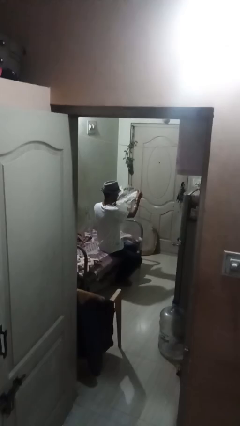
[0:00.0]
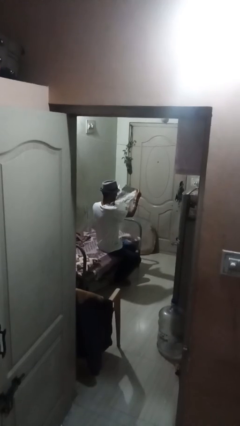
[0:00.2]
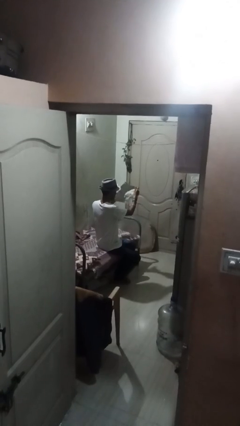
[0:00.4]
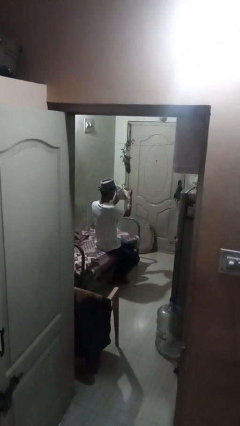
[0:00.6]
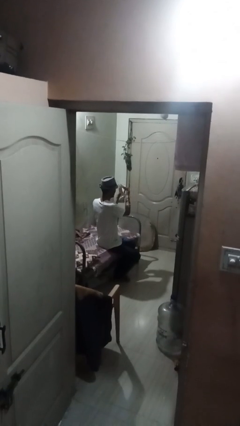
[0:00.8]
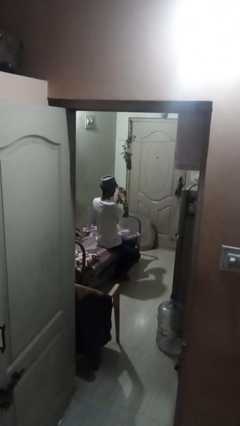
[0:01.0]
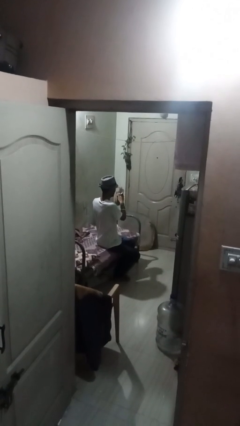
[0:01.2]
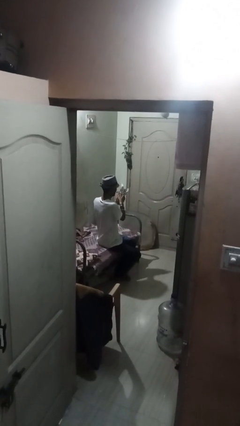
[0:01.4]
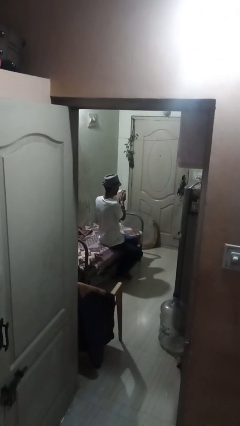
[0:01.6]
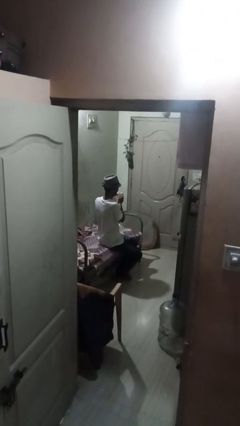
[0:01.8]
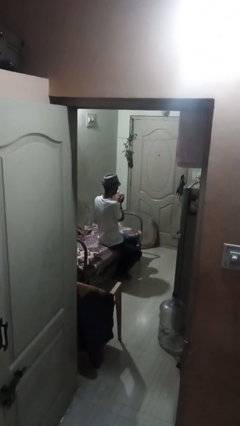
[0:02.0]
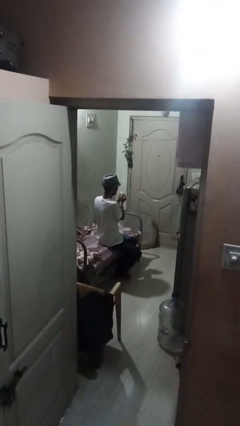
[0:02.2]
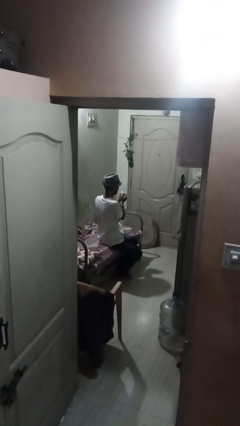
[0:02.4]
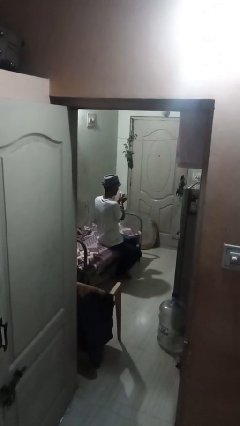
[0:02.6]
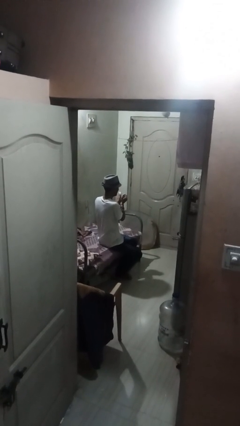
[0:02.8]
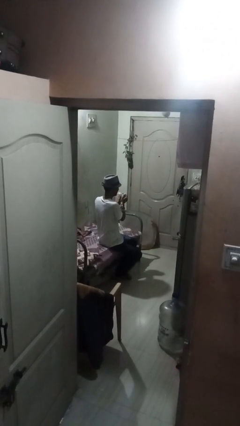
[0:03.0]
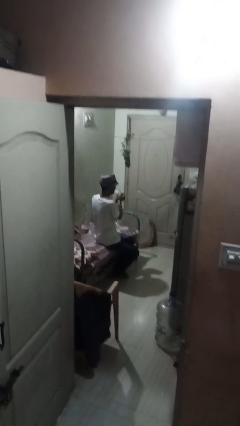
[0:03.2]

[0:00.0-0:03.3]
person crumples paper

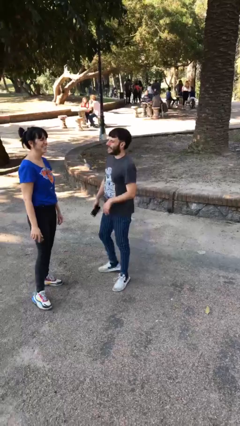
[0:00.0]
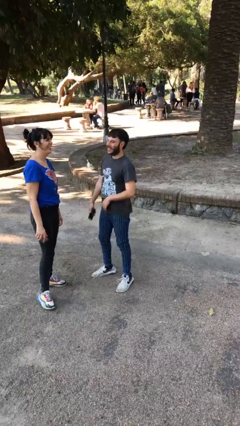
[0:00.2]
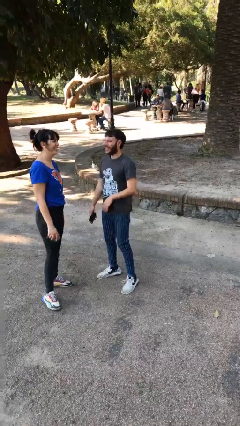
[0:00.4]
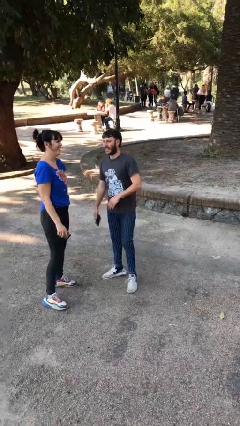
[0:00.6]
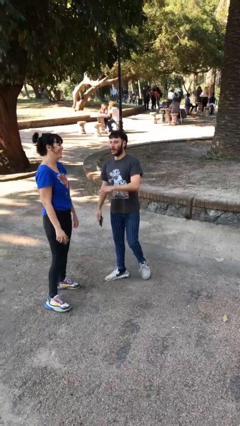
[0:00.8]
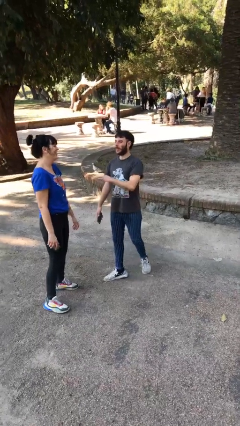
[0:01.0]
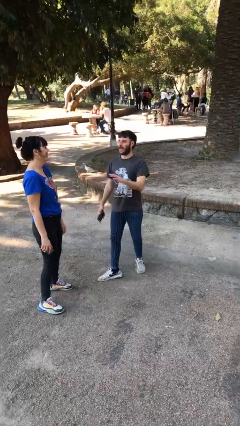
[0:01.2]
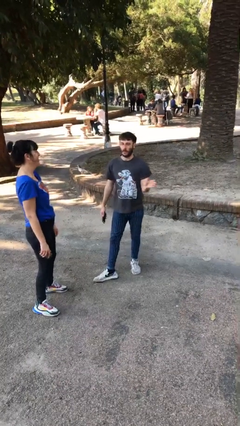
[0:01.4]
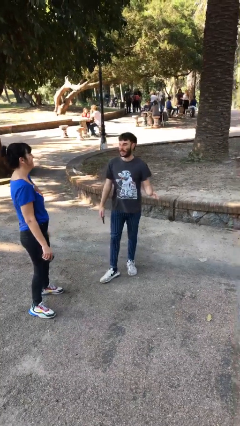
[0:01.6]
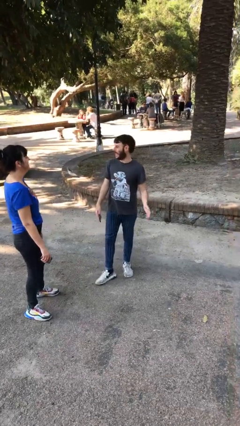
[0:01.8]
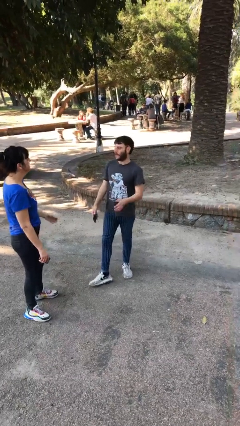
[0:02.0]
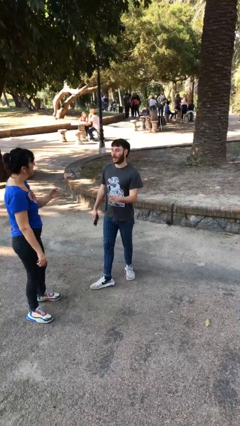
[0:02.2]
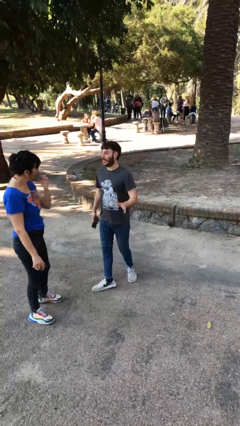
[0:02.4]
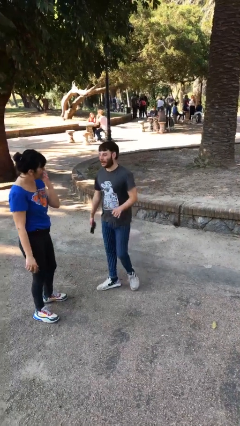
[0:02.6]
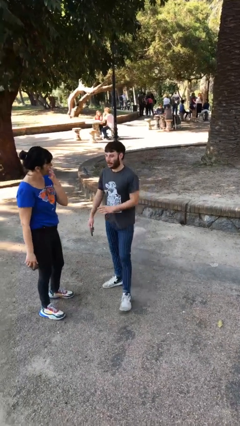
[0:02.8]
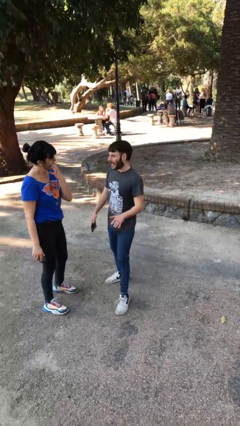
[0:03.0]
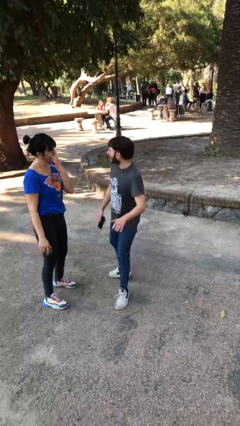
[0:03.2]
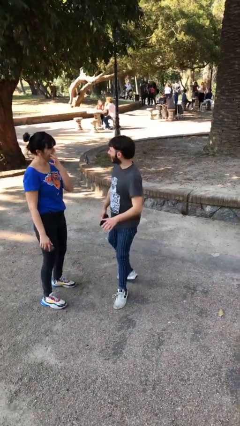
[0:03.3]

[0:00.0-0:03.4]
person laughs with person

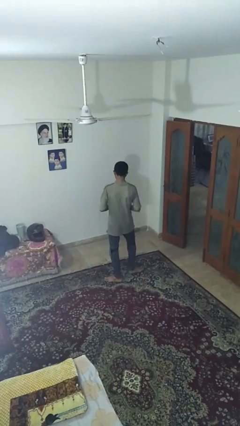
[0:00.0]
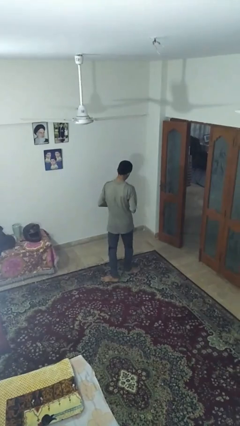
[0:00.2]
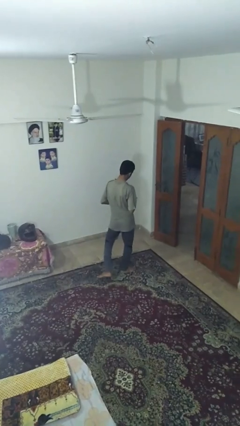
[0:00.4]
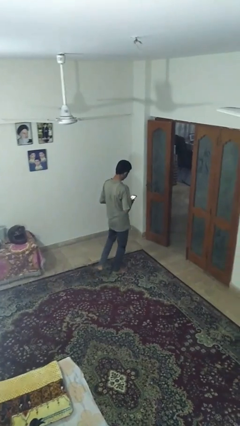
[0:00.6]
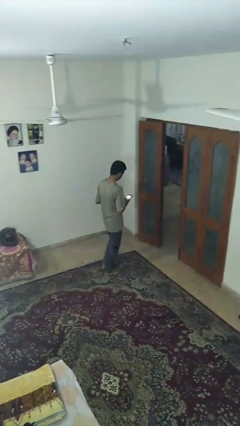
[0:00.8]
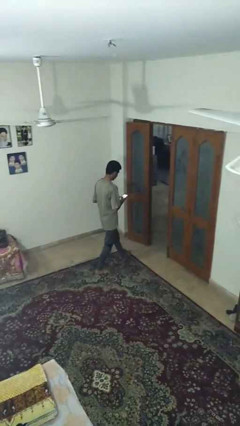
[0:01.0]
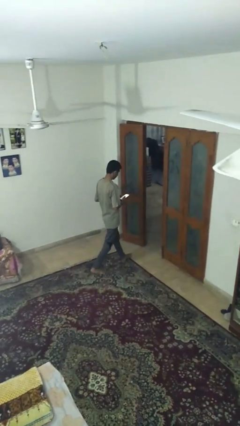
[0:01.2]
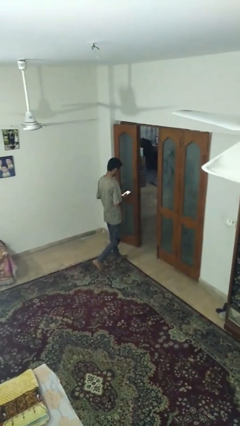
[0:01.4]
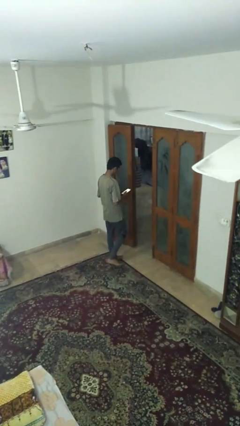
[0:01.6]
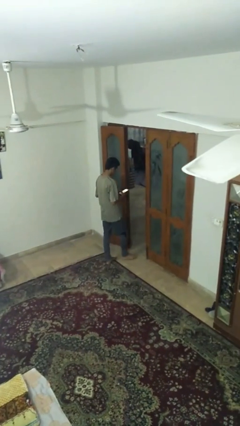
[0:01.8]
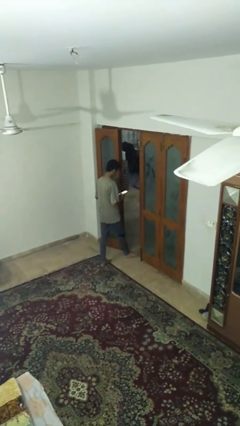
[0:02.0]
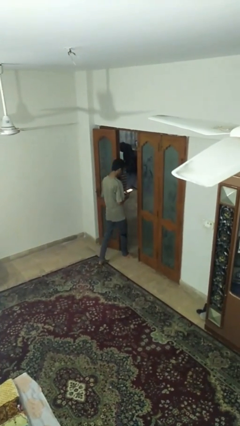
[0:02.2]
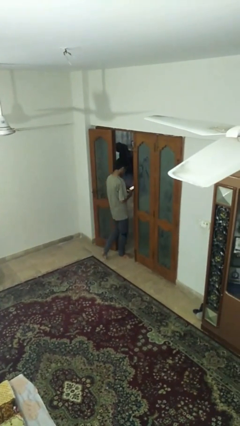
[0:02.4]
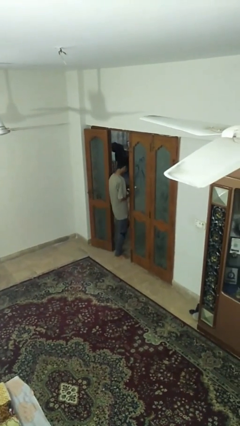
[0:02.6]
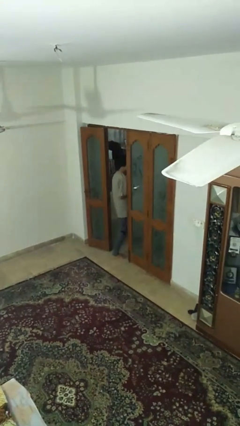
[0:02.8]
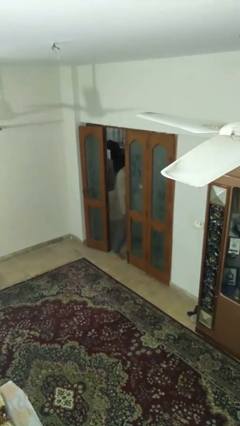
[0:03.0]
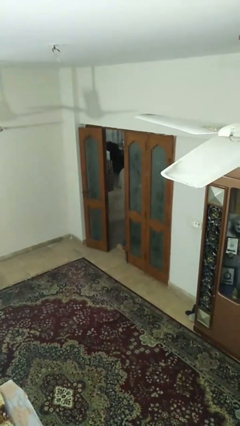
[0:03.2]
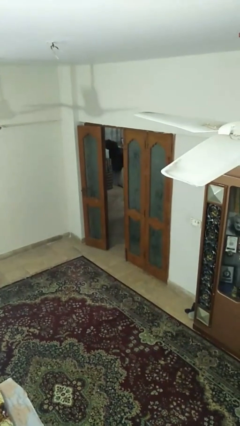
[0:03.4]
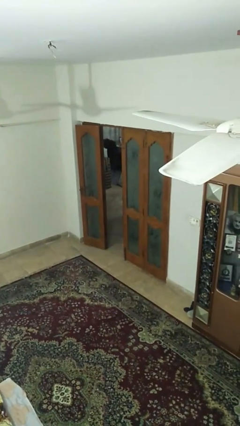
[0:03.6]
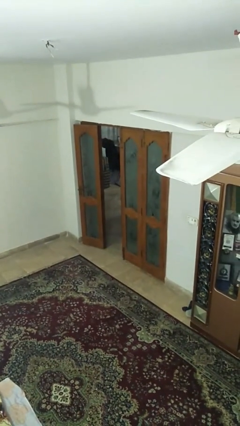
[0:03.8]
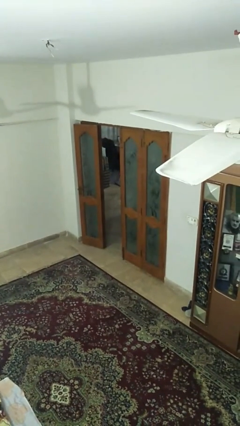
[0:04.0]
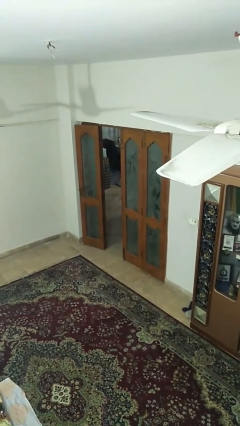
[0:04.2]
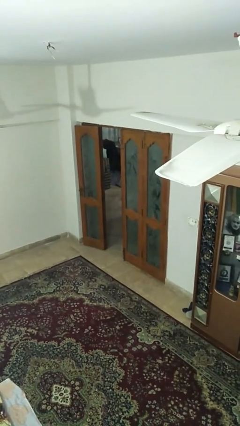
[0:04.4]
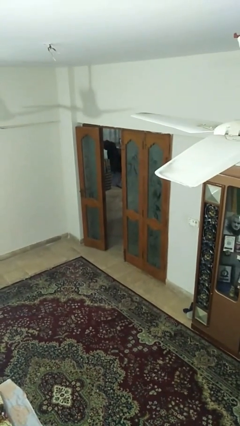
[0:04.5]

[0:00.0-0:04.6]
person exits scene through structure

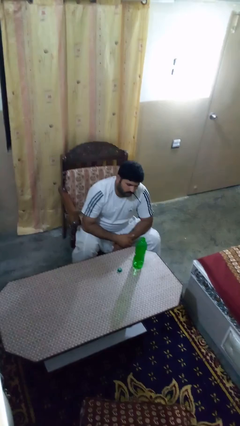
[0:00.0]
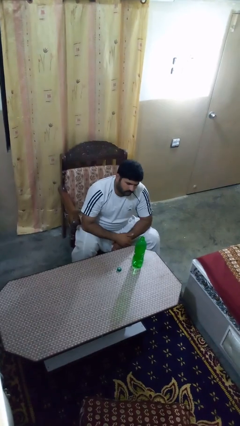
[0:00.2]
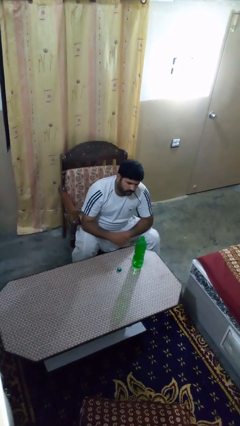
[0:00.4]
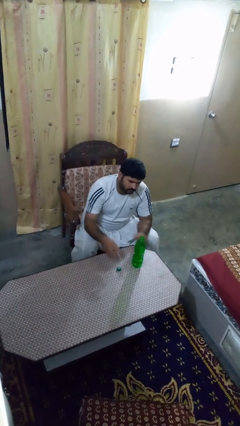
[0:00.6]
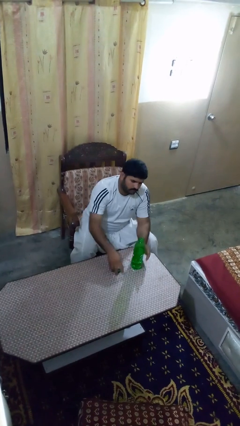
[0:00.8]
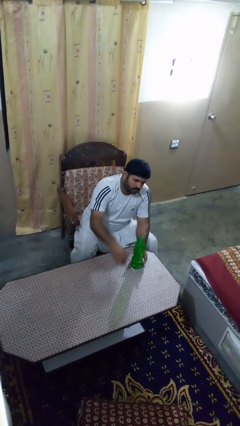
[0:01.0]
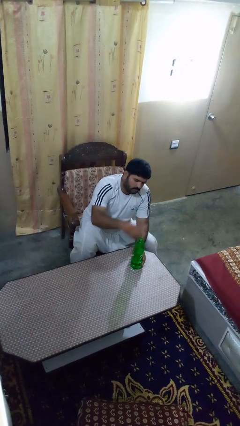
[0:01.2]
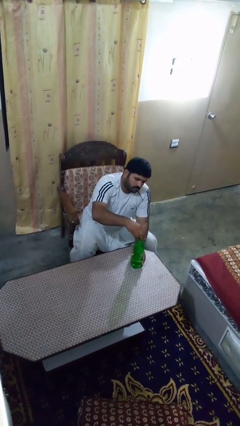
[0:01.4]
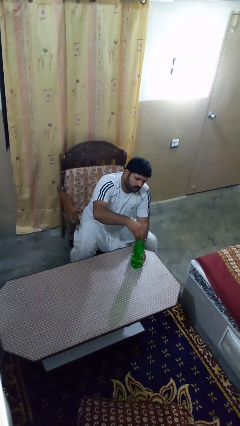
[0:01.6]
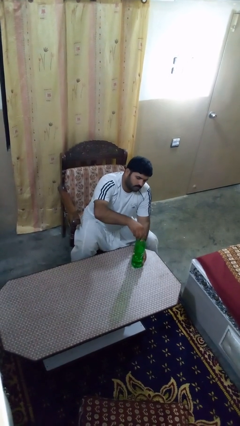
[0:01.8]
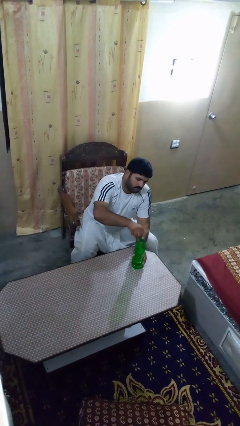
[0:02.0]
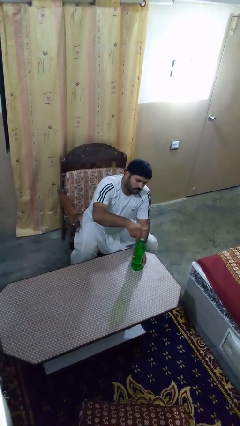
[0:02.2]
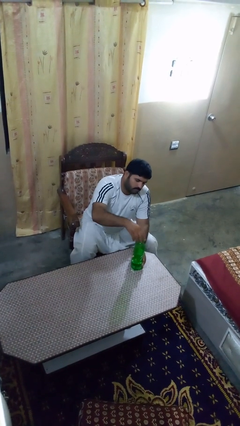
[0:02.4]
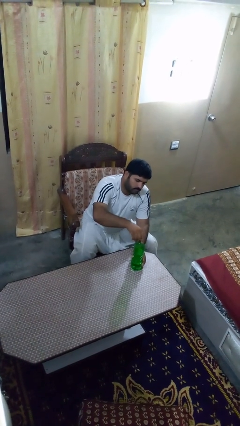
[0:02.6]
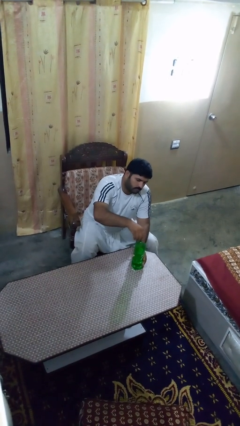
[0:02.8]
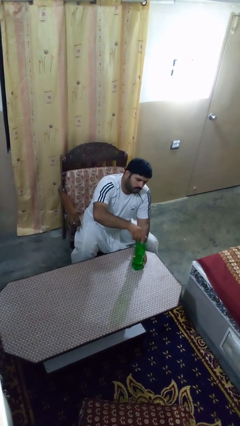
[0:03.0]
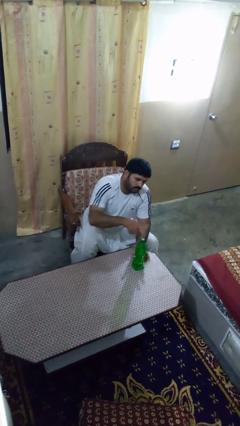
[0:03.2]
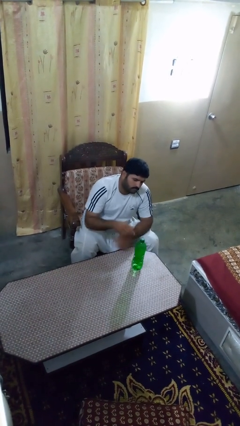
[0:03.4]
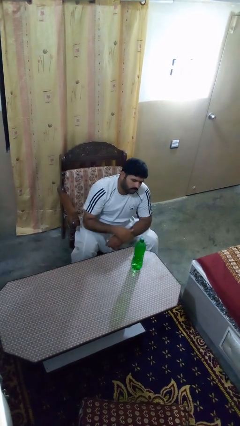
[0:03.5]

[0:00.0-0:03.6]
person screws lid to bottle

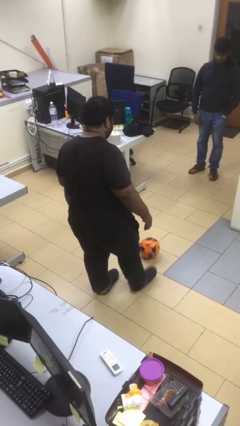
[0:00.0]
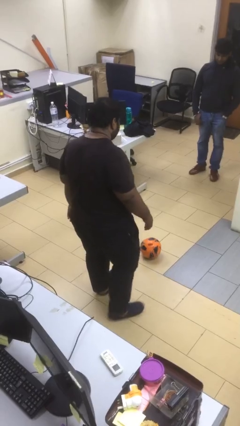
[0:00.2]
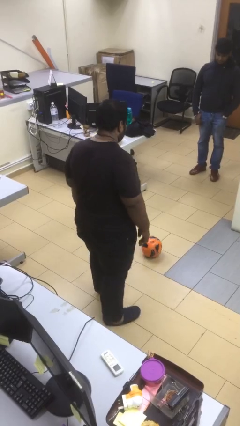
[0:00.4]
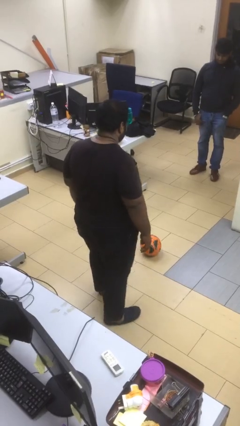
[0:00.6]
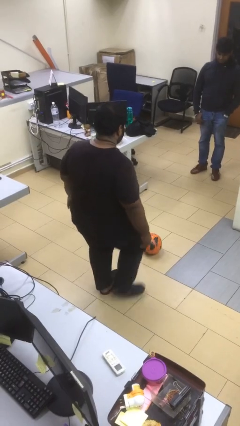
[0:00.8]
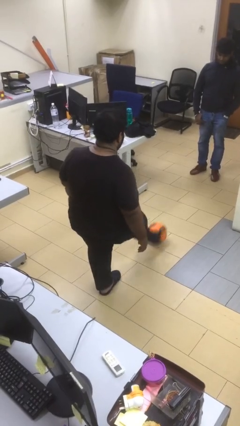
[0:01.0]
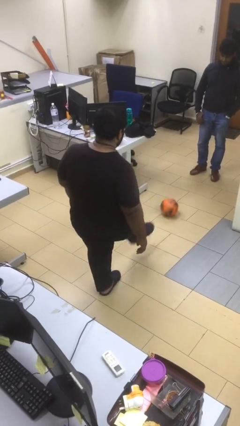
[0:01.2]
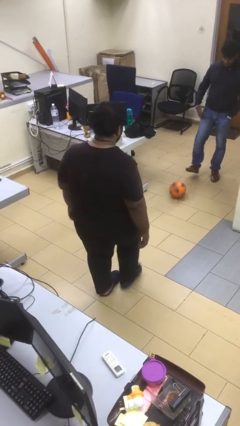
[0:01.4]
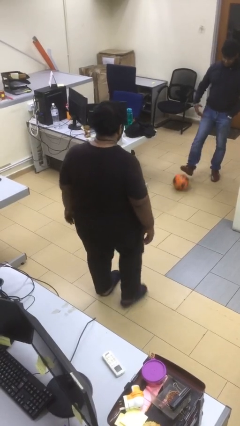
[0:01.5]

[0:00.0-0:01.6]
person kicks object to person

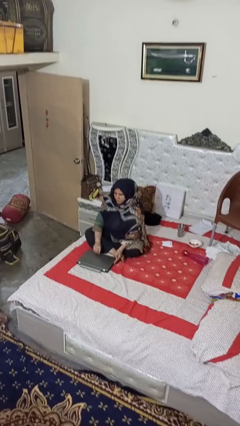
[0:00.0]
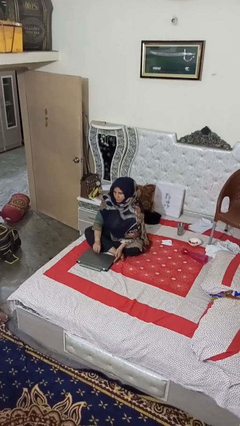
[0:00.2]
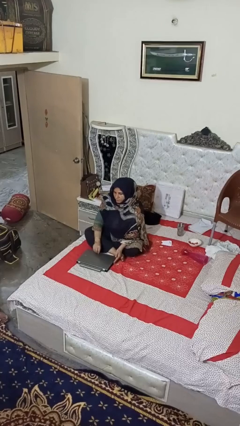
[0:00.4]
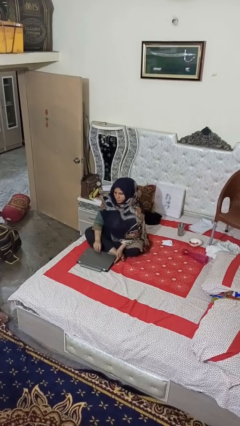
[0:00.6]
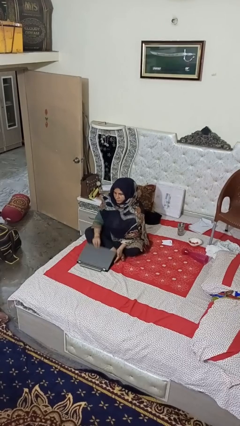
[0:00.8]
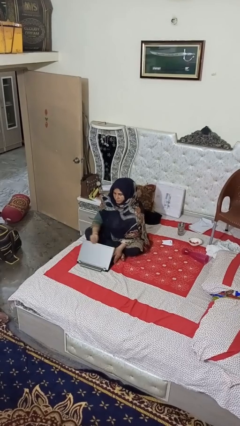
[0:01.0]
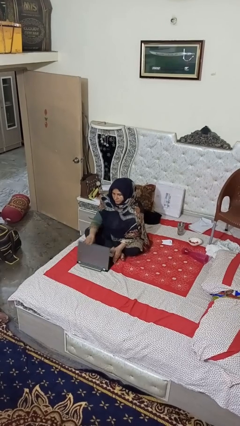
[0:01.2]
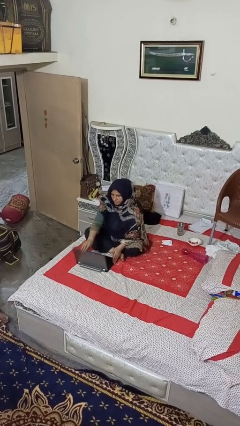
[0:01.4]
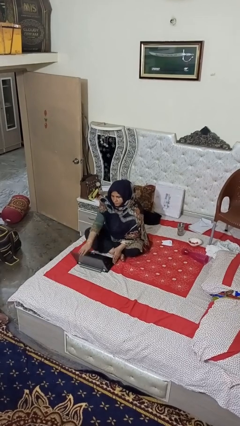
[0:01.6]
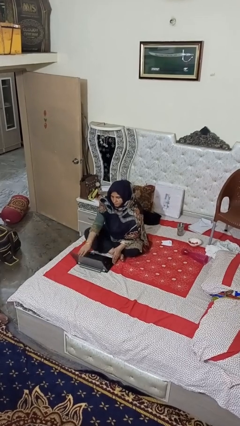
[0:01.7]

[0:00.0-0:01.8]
person opens laptop
